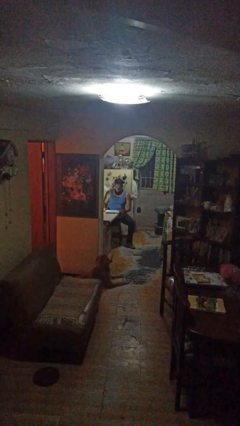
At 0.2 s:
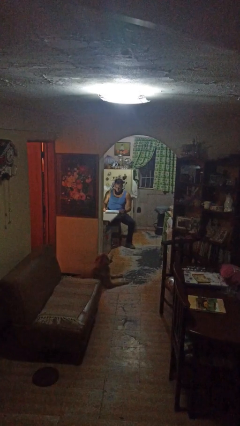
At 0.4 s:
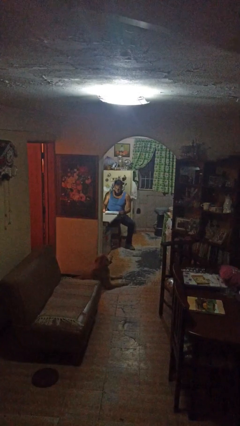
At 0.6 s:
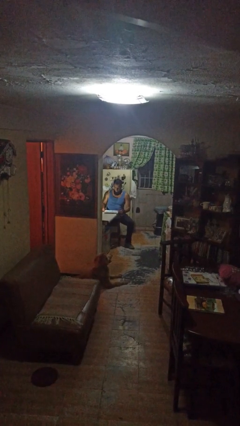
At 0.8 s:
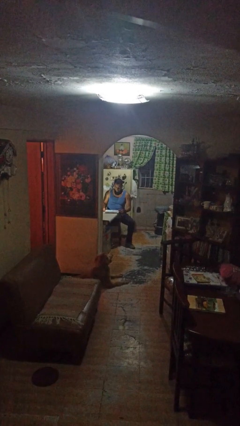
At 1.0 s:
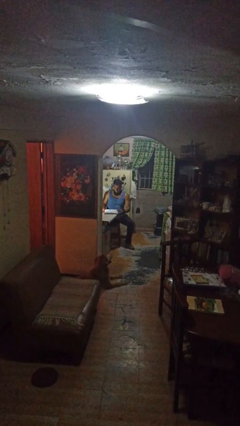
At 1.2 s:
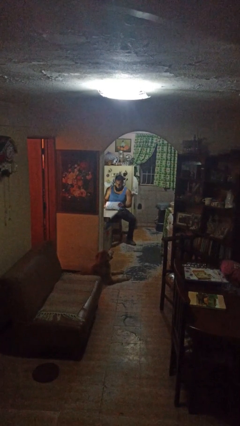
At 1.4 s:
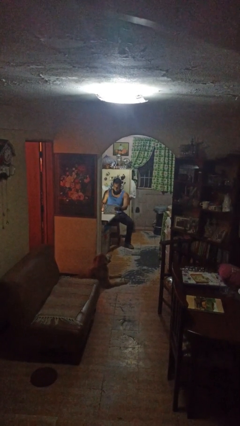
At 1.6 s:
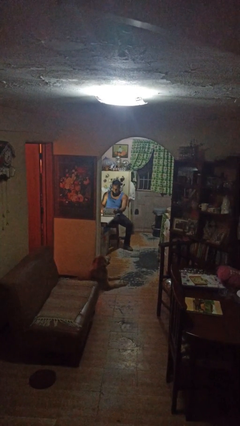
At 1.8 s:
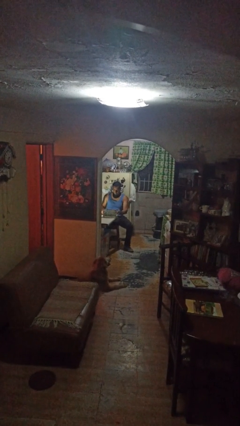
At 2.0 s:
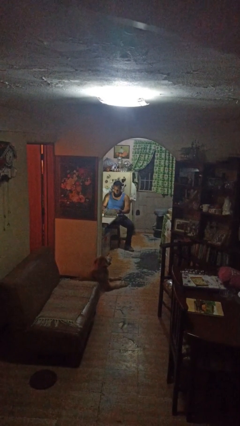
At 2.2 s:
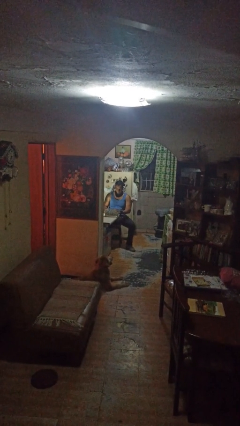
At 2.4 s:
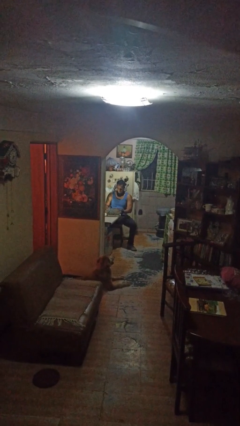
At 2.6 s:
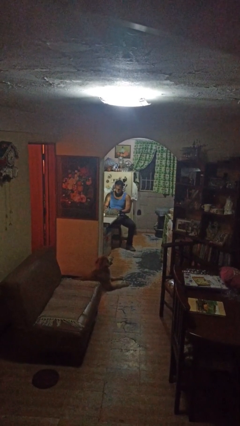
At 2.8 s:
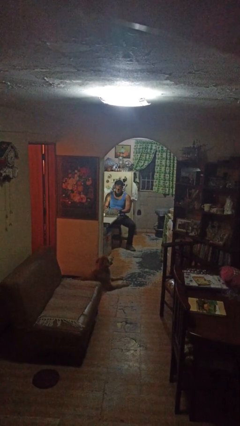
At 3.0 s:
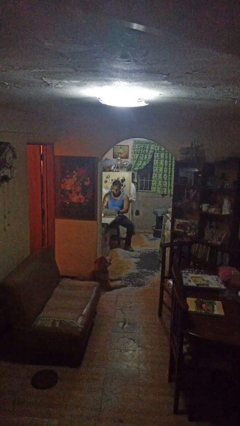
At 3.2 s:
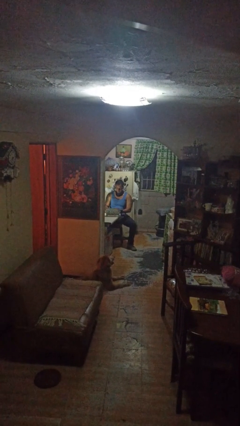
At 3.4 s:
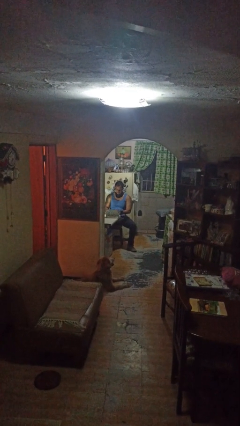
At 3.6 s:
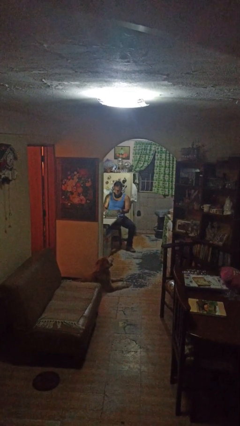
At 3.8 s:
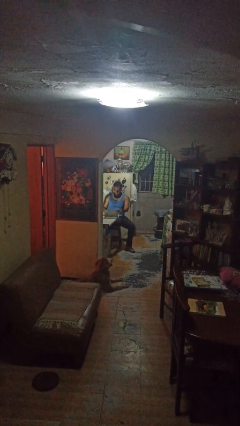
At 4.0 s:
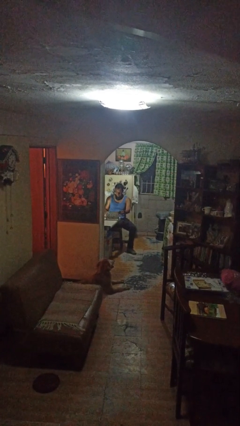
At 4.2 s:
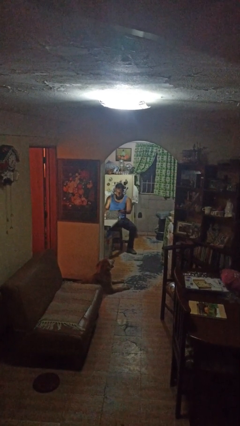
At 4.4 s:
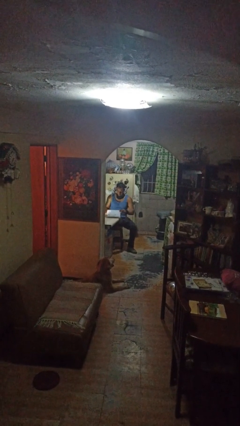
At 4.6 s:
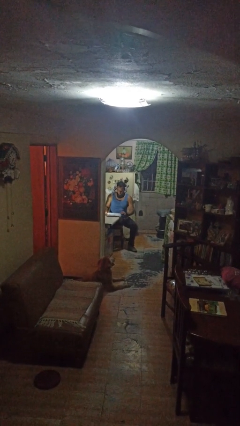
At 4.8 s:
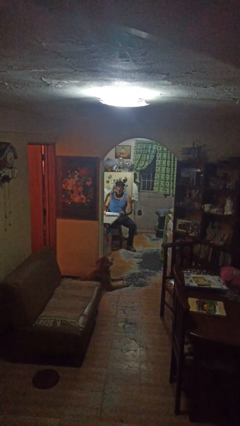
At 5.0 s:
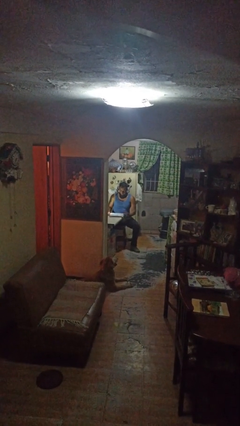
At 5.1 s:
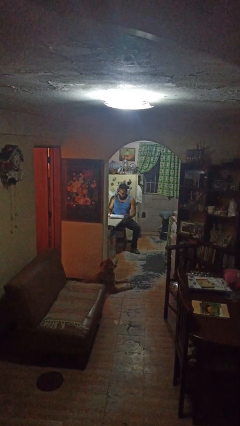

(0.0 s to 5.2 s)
person interacts with laptop

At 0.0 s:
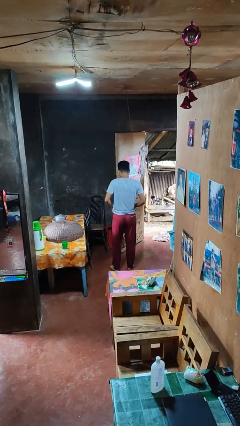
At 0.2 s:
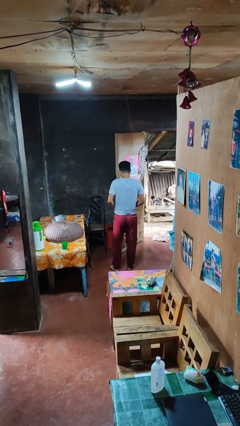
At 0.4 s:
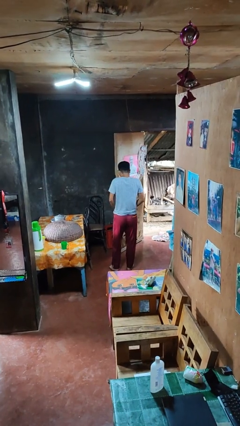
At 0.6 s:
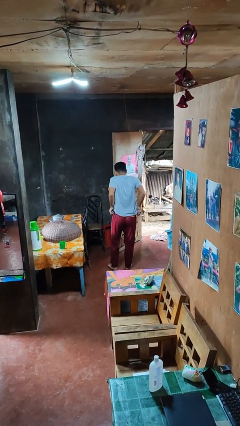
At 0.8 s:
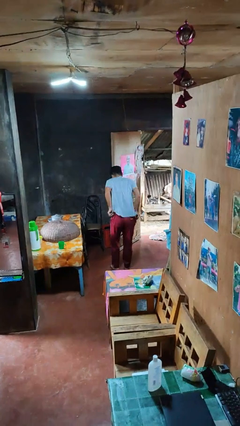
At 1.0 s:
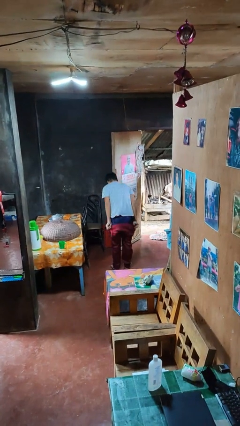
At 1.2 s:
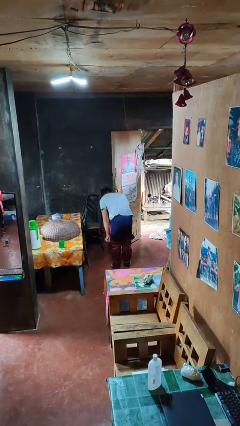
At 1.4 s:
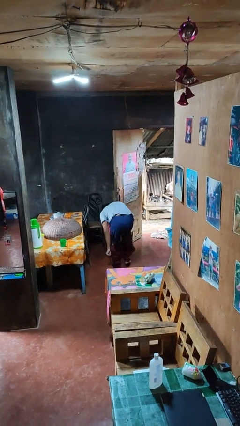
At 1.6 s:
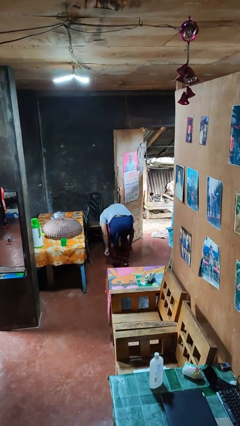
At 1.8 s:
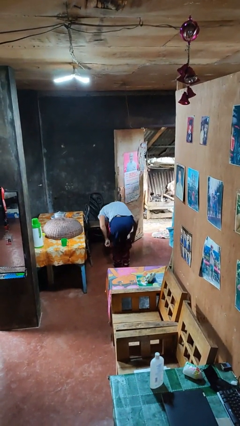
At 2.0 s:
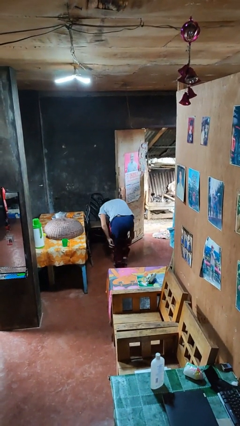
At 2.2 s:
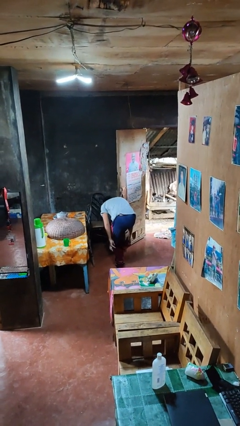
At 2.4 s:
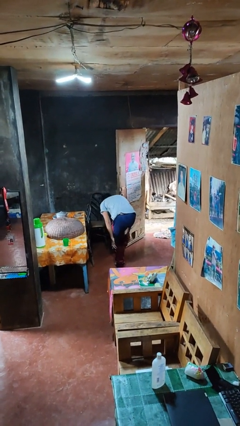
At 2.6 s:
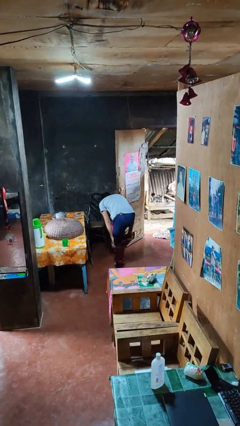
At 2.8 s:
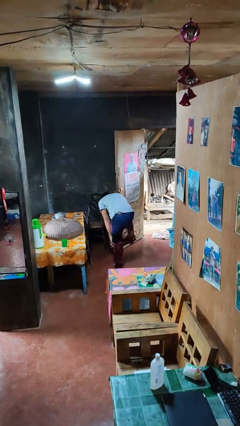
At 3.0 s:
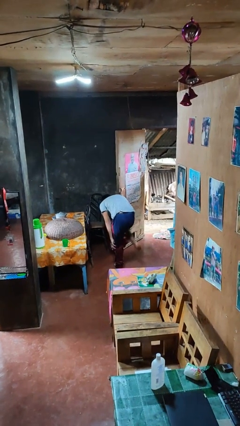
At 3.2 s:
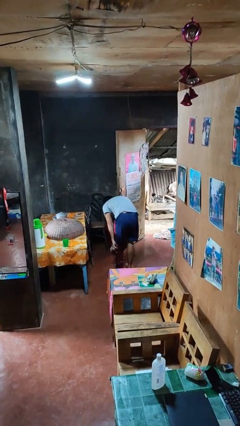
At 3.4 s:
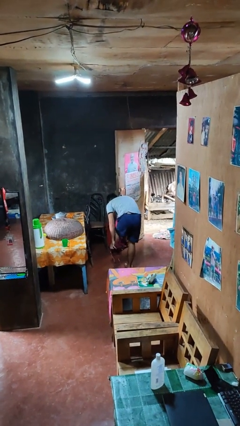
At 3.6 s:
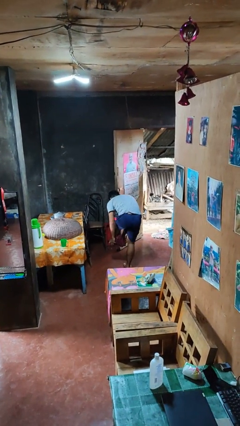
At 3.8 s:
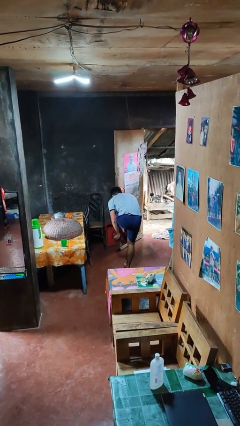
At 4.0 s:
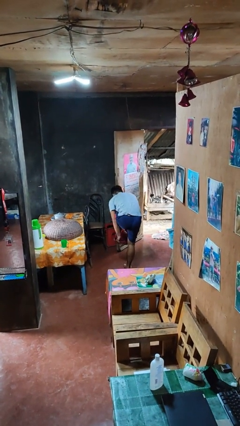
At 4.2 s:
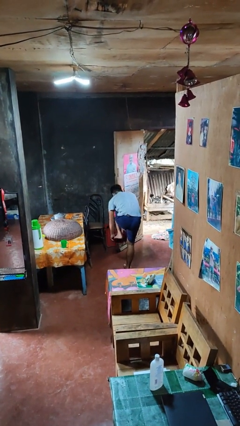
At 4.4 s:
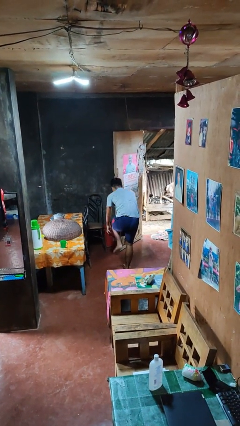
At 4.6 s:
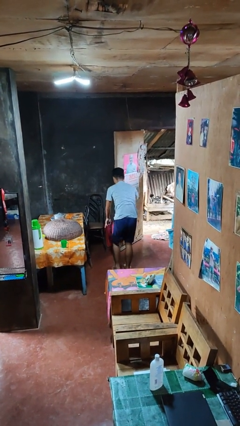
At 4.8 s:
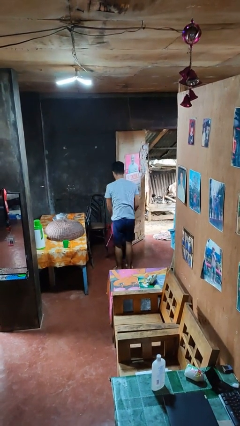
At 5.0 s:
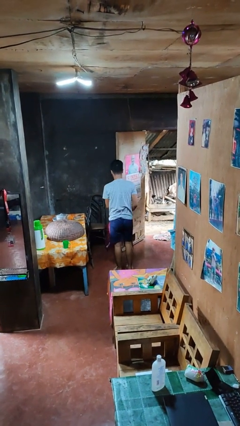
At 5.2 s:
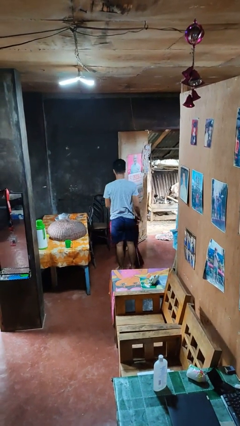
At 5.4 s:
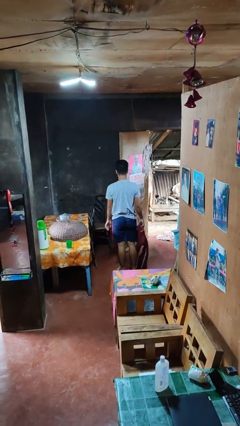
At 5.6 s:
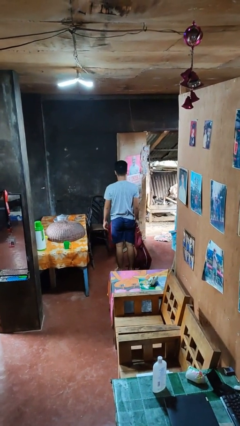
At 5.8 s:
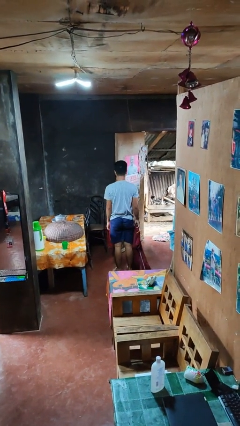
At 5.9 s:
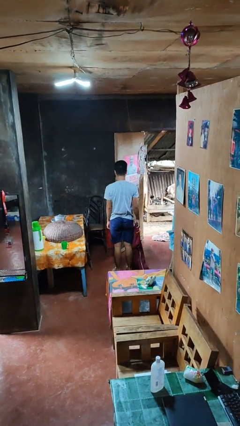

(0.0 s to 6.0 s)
person takes off pants

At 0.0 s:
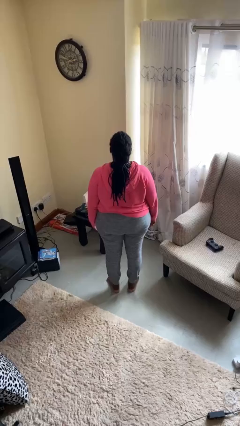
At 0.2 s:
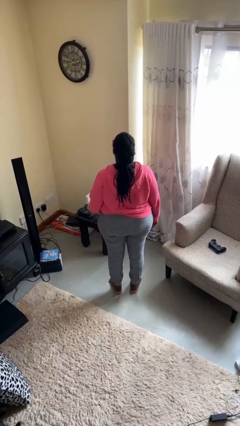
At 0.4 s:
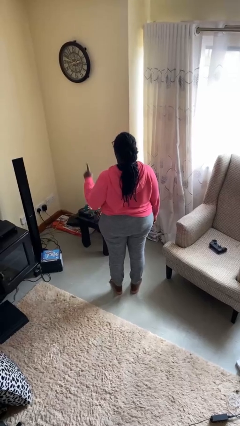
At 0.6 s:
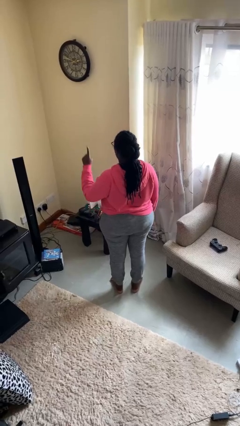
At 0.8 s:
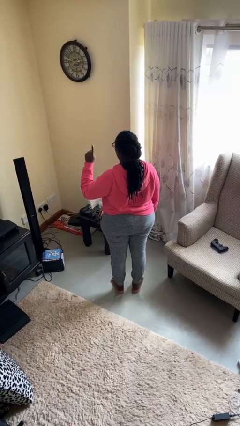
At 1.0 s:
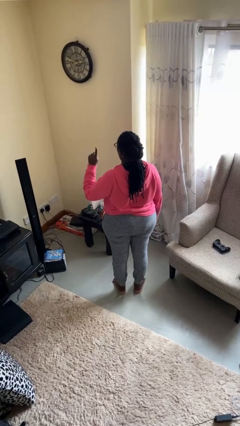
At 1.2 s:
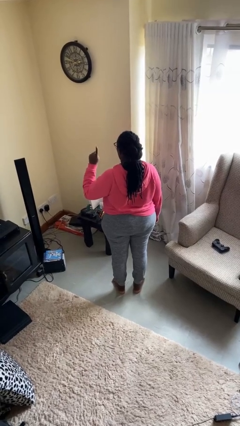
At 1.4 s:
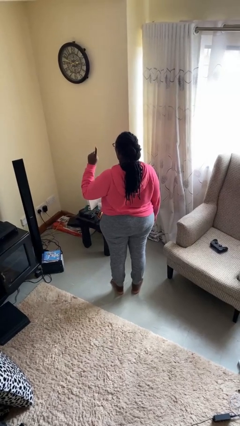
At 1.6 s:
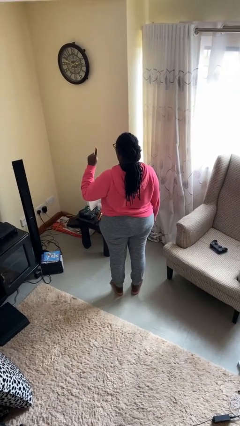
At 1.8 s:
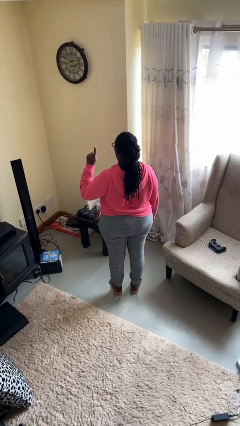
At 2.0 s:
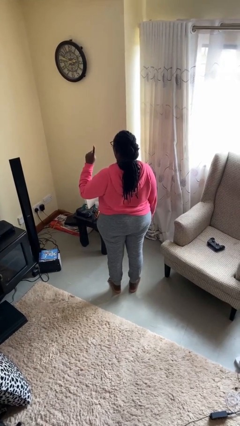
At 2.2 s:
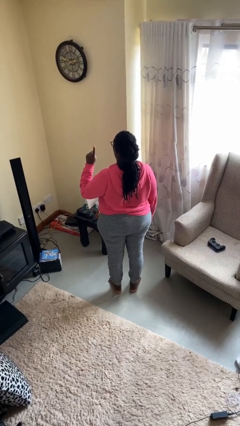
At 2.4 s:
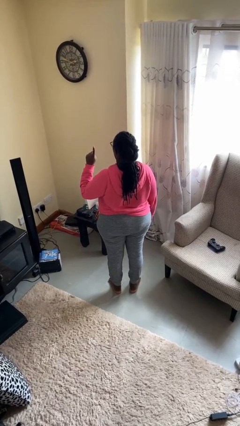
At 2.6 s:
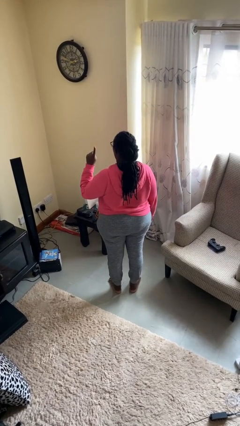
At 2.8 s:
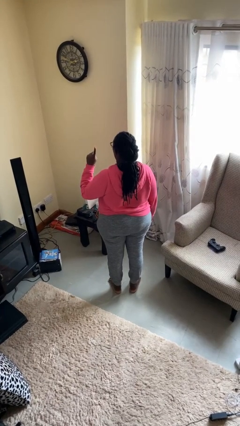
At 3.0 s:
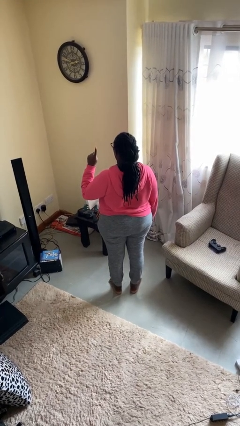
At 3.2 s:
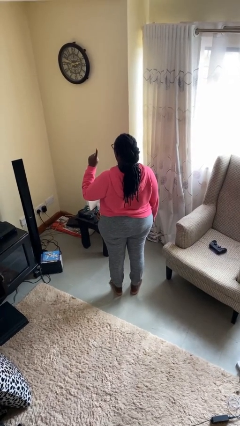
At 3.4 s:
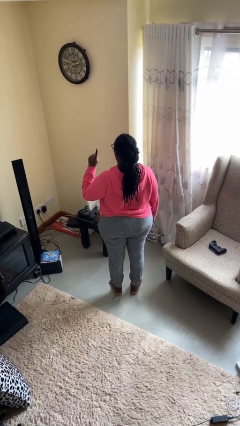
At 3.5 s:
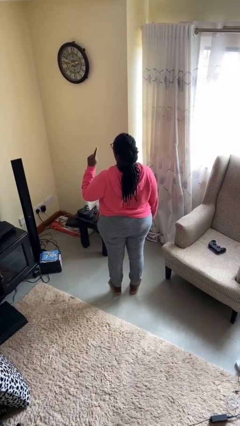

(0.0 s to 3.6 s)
person gestures number one

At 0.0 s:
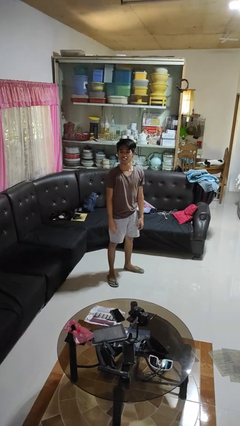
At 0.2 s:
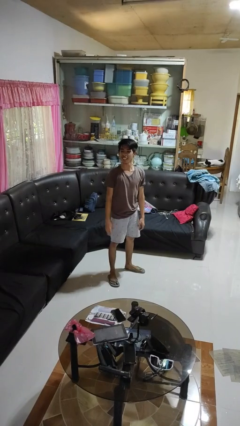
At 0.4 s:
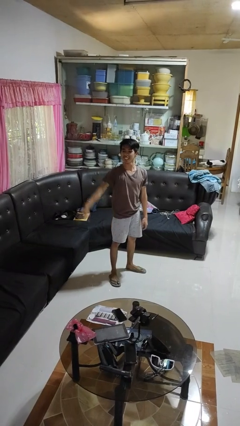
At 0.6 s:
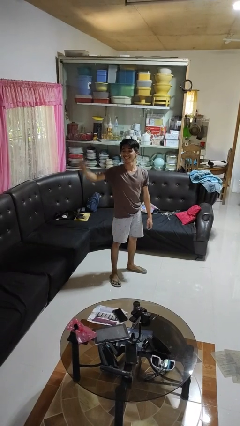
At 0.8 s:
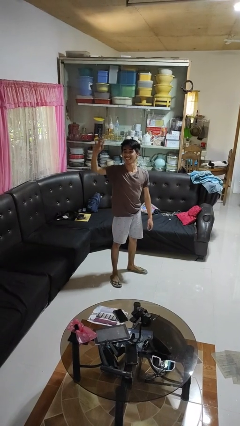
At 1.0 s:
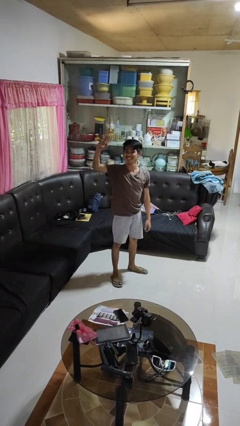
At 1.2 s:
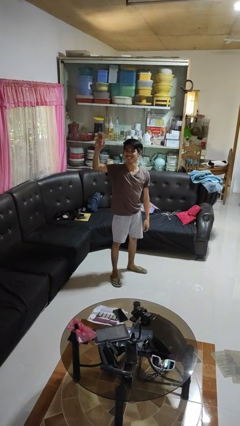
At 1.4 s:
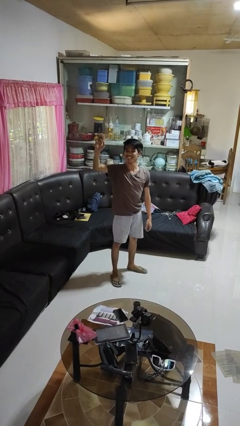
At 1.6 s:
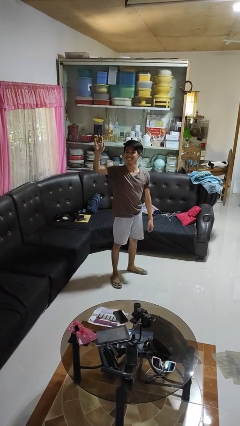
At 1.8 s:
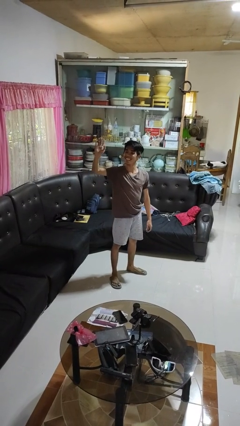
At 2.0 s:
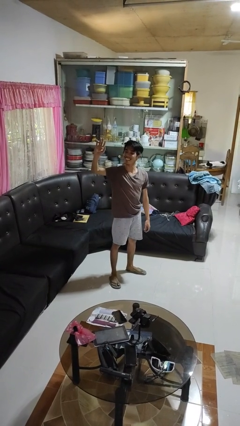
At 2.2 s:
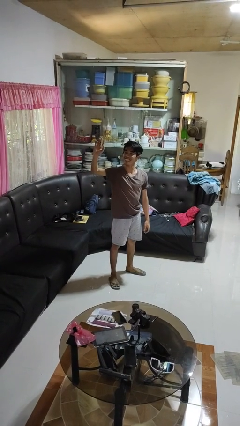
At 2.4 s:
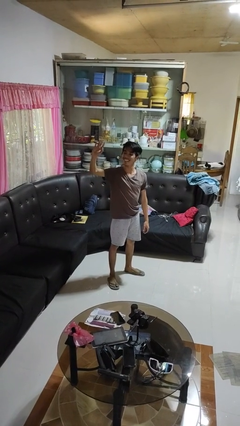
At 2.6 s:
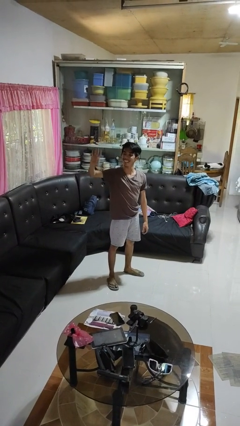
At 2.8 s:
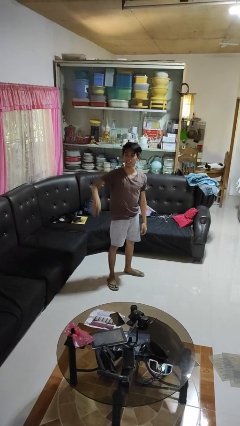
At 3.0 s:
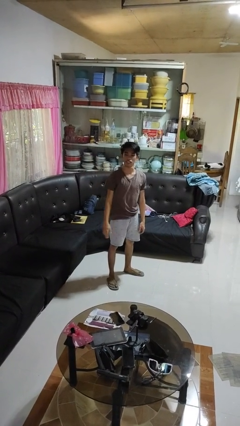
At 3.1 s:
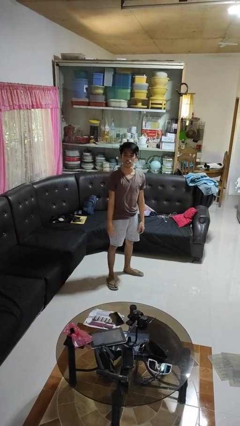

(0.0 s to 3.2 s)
person waves at person
